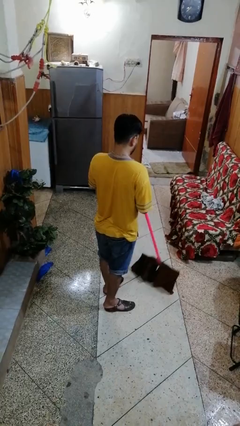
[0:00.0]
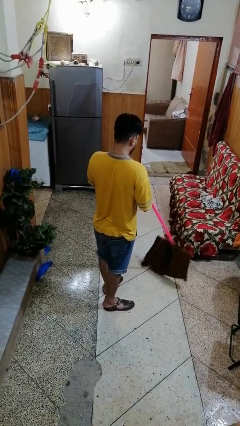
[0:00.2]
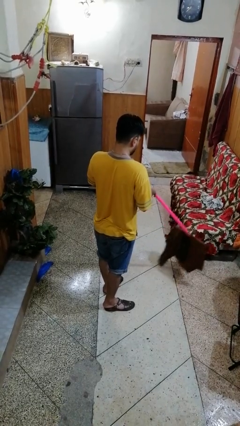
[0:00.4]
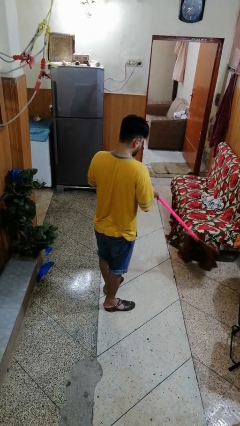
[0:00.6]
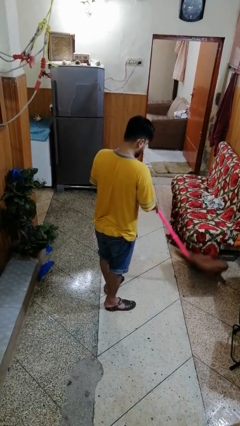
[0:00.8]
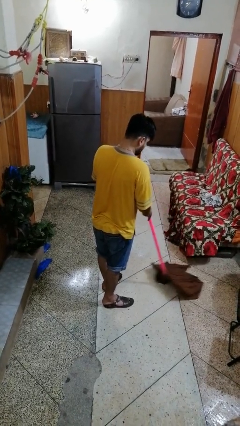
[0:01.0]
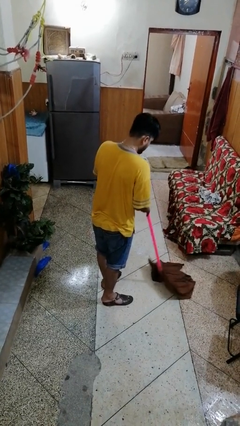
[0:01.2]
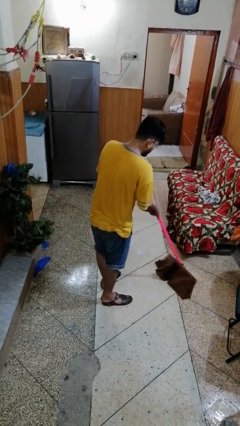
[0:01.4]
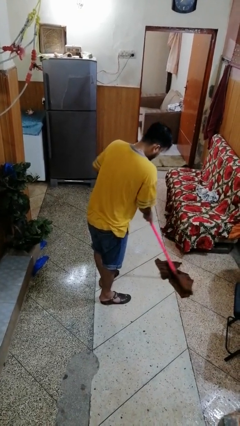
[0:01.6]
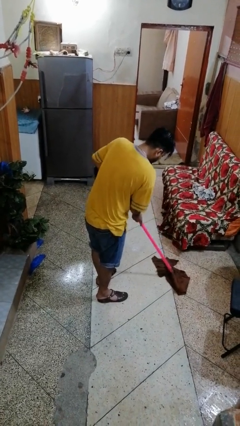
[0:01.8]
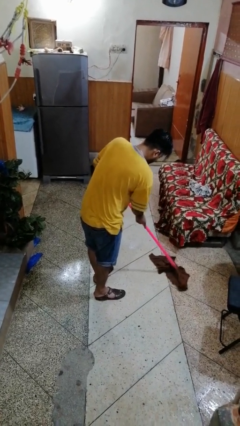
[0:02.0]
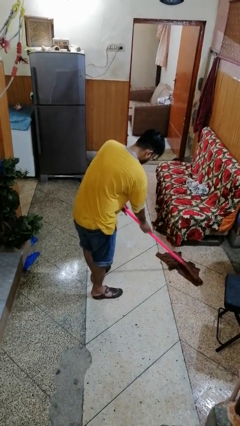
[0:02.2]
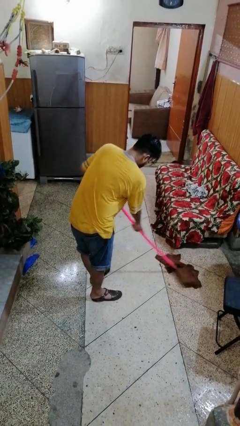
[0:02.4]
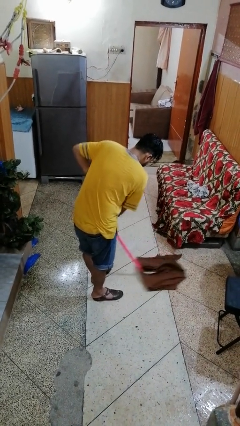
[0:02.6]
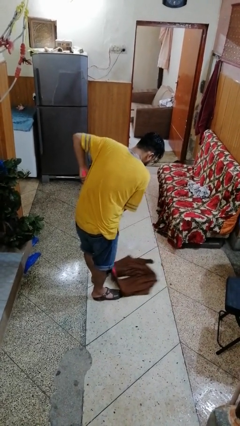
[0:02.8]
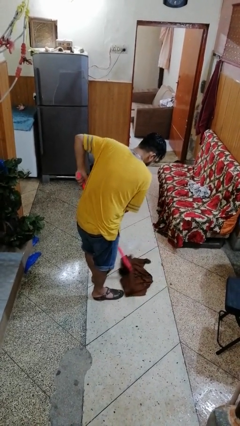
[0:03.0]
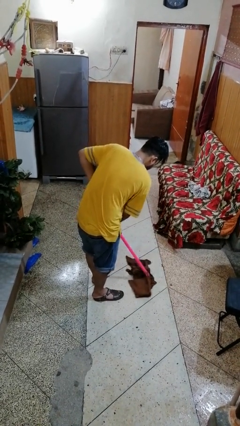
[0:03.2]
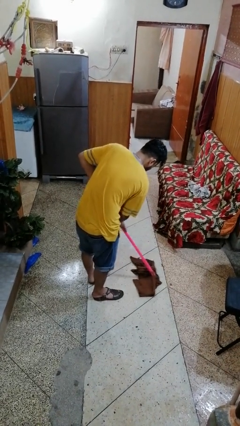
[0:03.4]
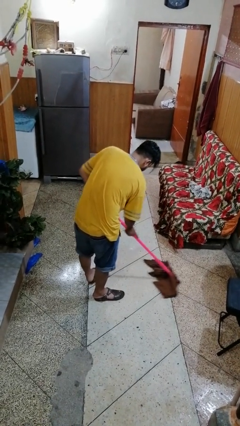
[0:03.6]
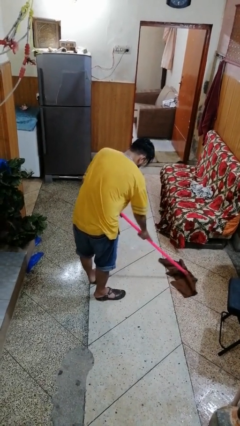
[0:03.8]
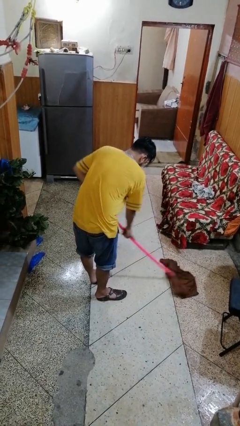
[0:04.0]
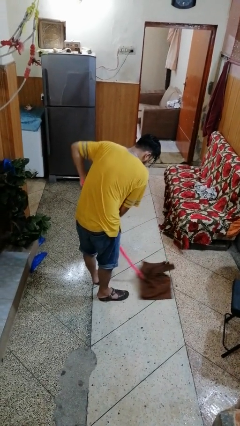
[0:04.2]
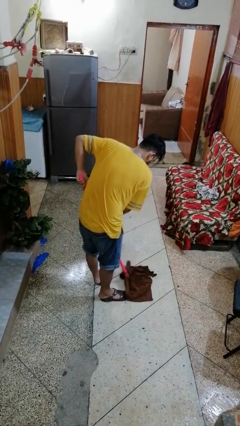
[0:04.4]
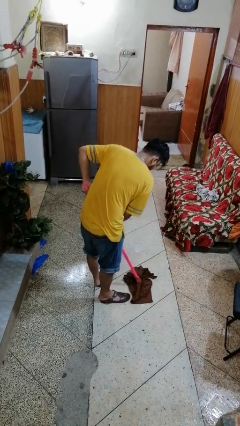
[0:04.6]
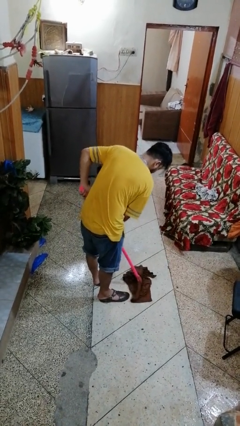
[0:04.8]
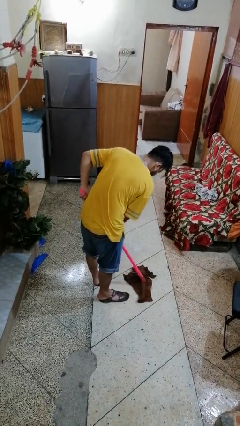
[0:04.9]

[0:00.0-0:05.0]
person mops

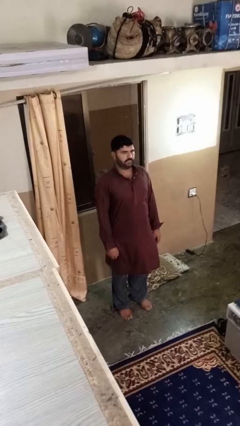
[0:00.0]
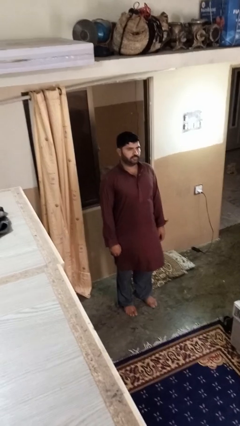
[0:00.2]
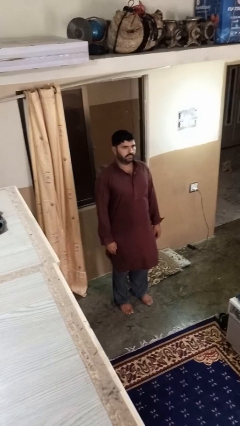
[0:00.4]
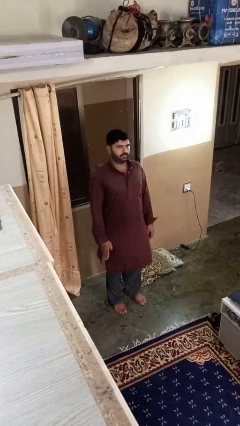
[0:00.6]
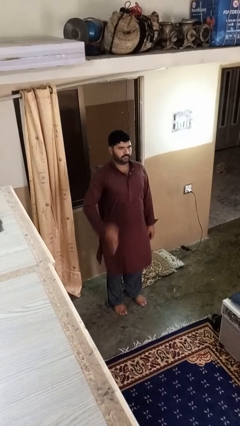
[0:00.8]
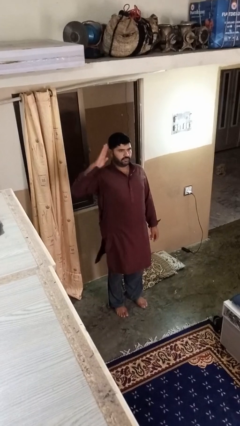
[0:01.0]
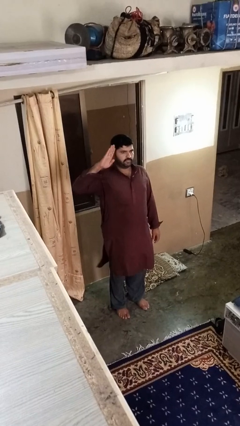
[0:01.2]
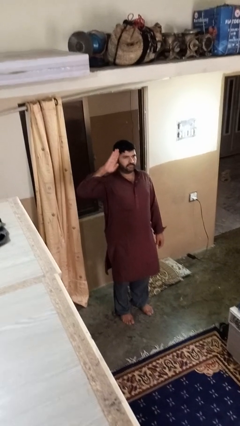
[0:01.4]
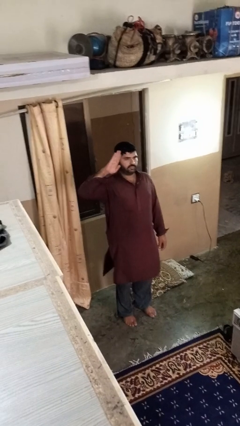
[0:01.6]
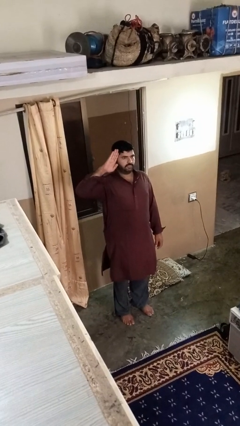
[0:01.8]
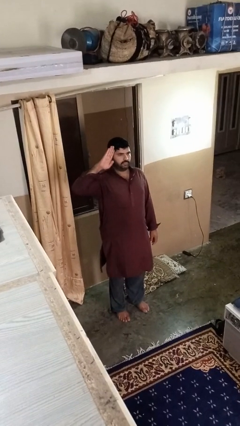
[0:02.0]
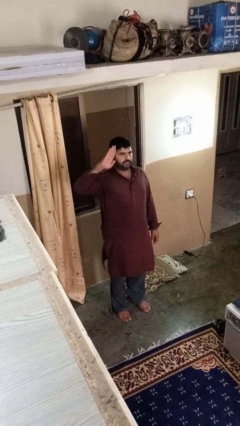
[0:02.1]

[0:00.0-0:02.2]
person salutes

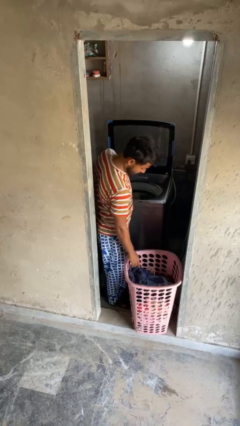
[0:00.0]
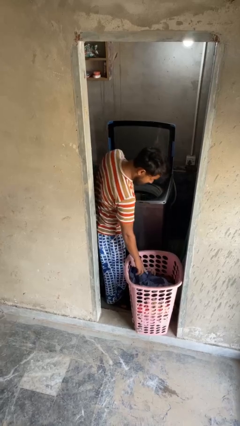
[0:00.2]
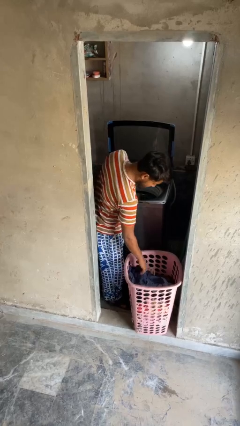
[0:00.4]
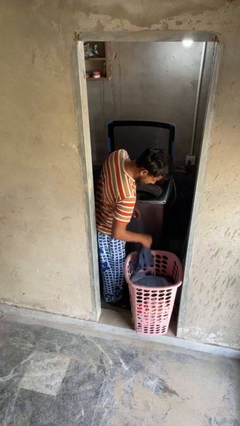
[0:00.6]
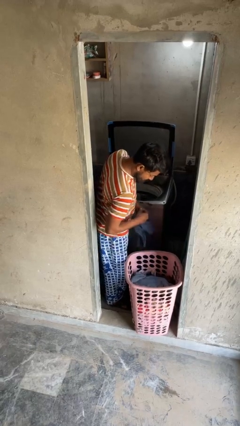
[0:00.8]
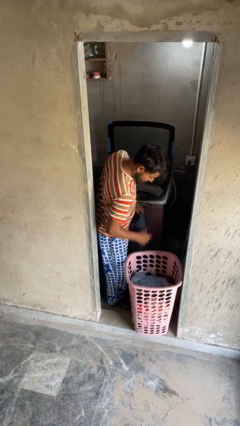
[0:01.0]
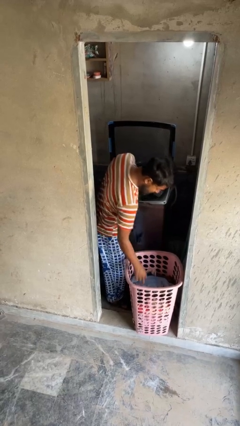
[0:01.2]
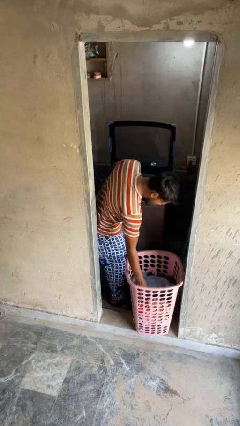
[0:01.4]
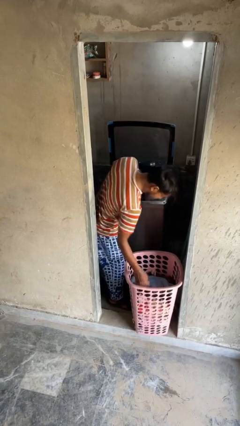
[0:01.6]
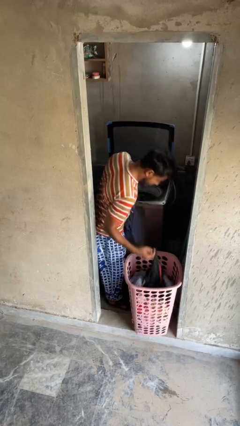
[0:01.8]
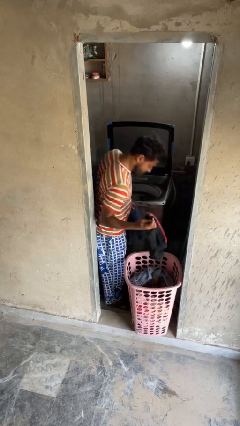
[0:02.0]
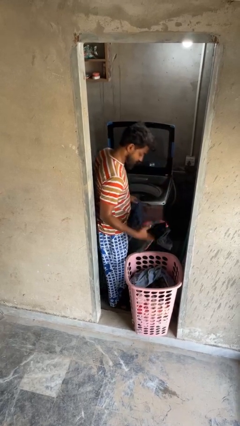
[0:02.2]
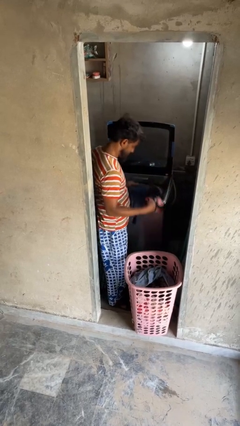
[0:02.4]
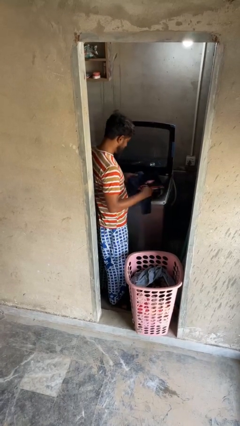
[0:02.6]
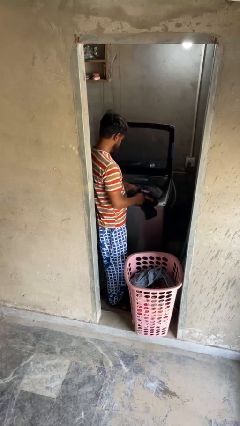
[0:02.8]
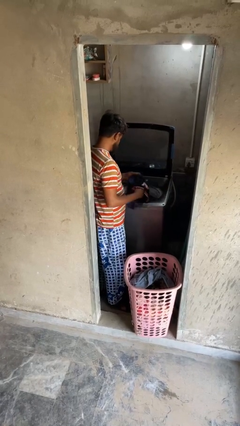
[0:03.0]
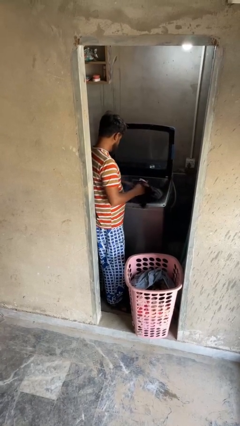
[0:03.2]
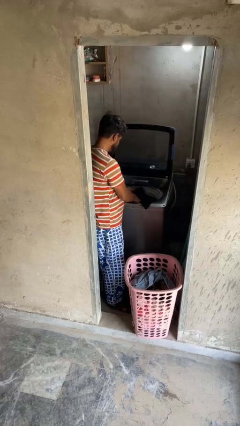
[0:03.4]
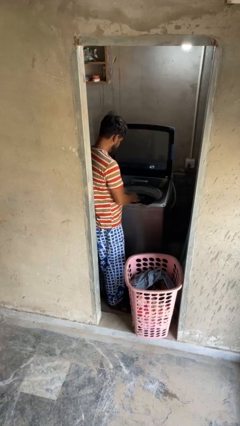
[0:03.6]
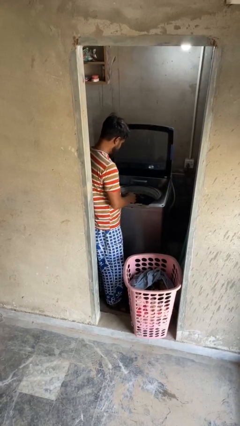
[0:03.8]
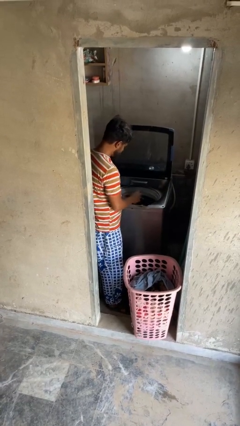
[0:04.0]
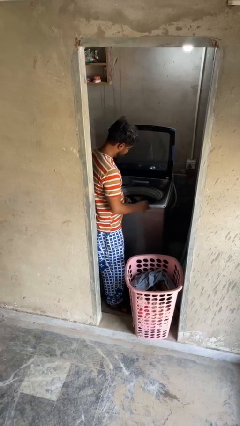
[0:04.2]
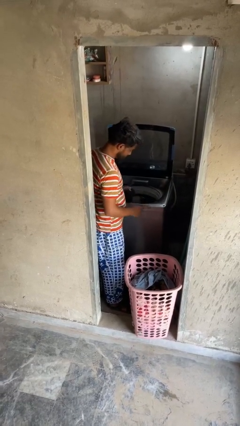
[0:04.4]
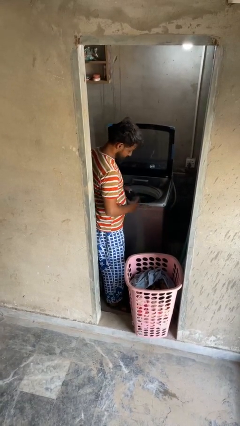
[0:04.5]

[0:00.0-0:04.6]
person loads dishwasher

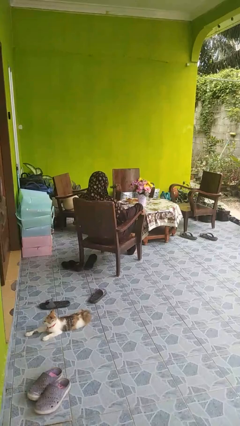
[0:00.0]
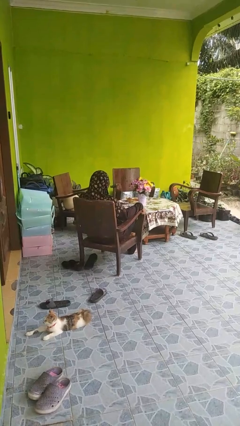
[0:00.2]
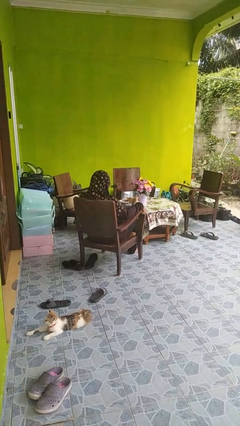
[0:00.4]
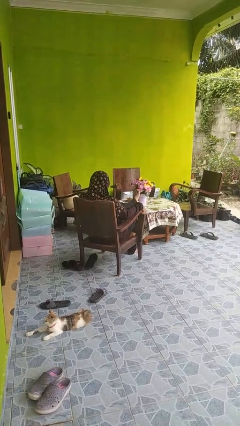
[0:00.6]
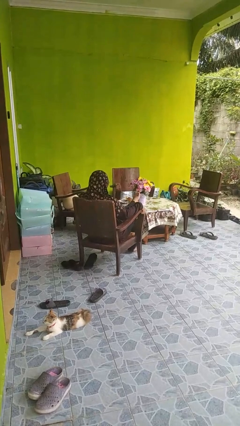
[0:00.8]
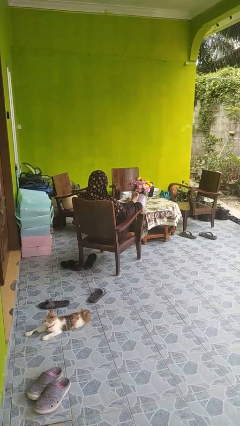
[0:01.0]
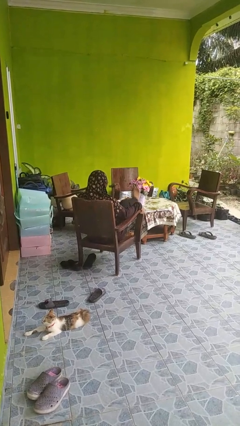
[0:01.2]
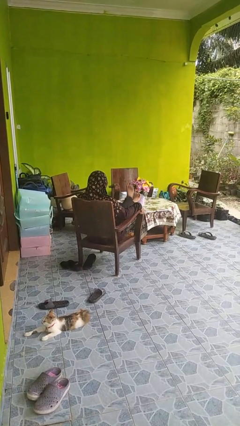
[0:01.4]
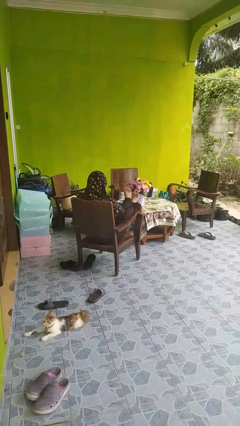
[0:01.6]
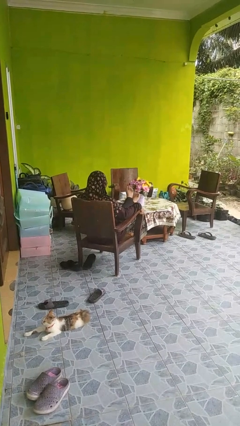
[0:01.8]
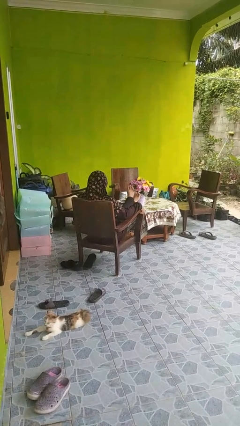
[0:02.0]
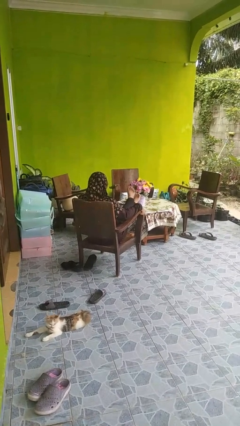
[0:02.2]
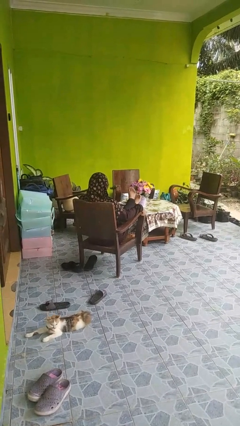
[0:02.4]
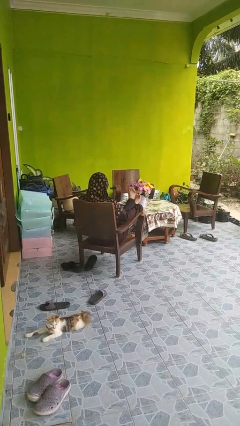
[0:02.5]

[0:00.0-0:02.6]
person puts feet up

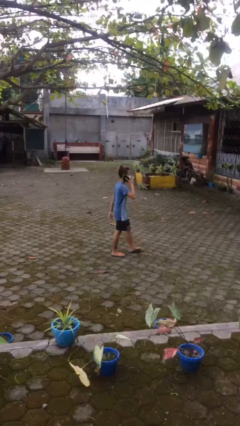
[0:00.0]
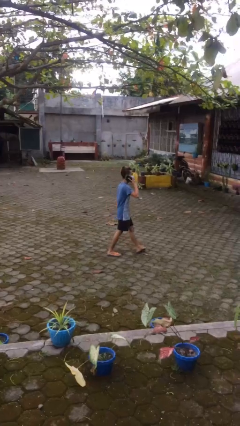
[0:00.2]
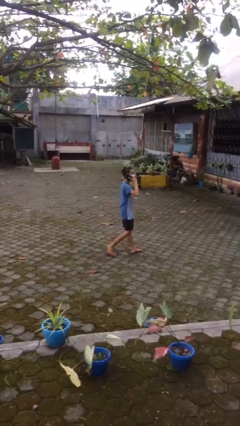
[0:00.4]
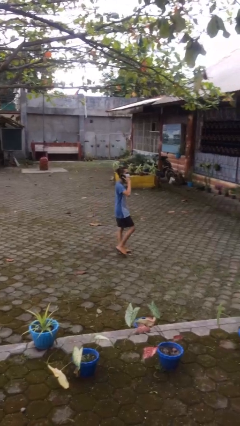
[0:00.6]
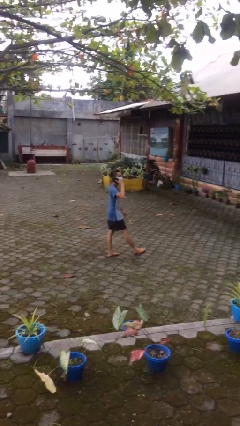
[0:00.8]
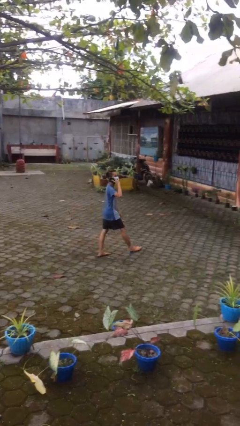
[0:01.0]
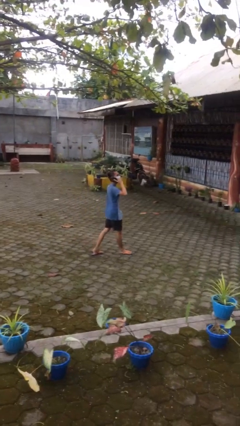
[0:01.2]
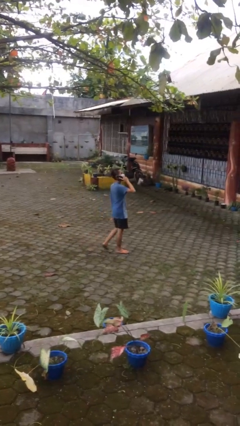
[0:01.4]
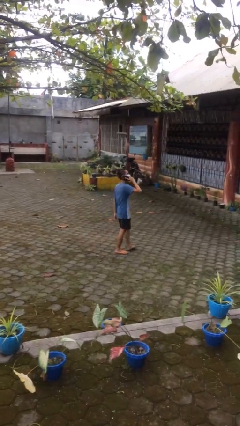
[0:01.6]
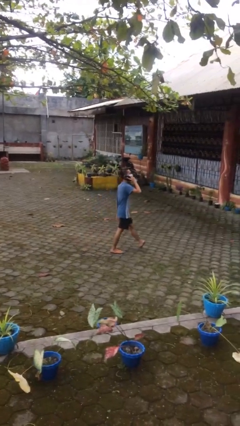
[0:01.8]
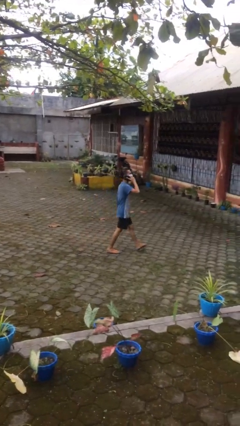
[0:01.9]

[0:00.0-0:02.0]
person talks on phone

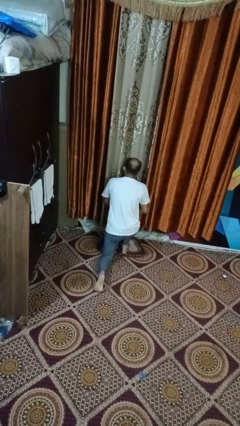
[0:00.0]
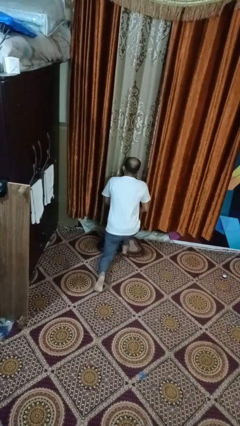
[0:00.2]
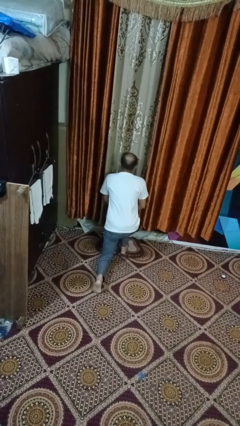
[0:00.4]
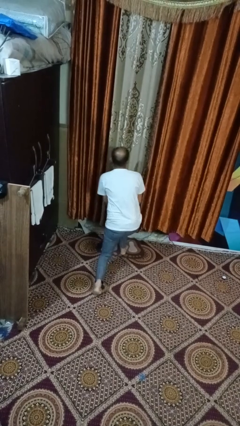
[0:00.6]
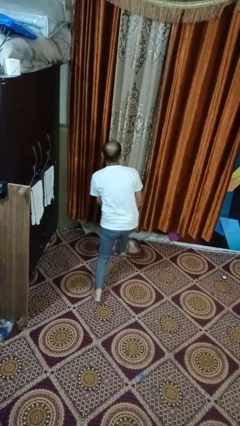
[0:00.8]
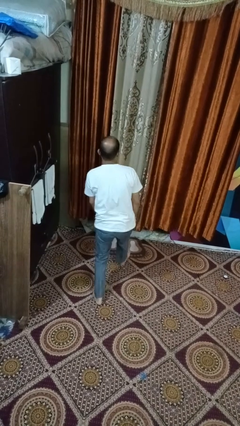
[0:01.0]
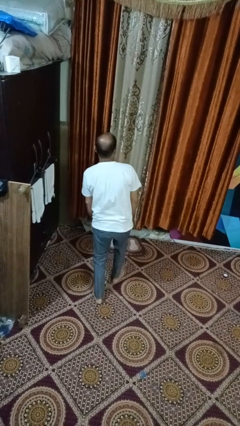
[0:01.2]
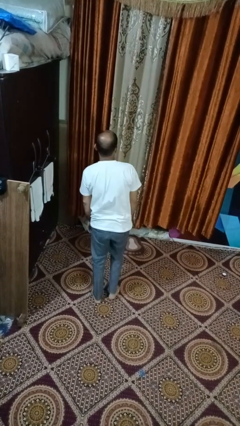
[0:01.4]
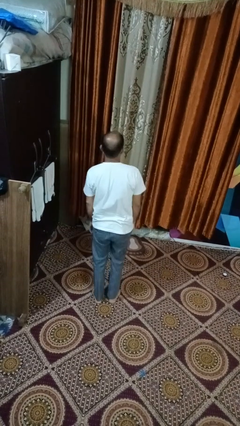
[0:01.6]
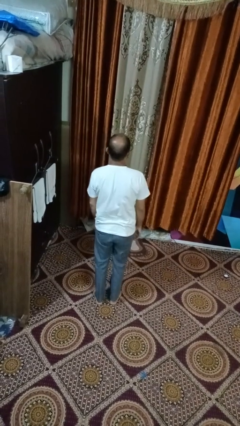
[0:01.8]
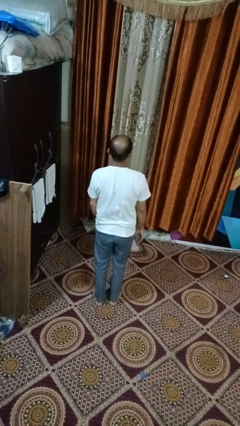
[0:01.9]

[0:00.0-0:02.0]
person stands up from floor
